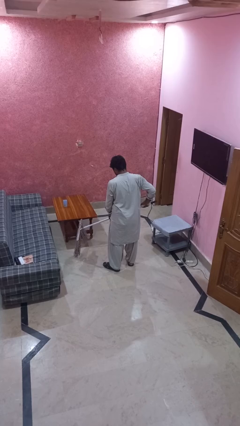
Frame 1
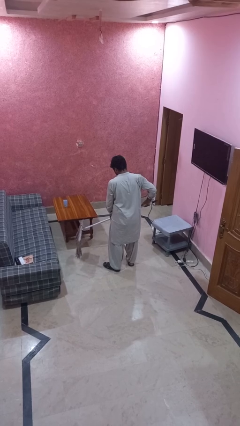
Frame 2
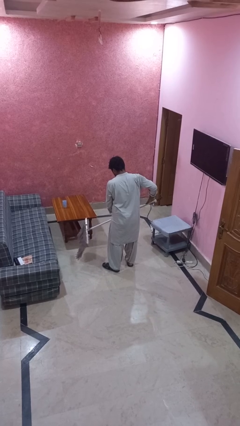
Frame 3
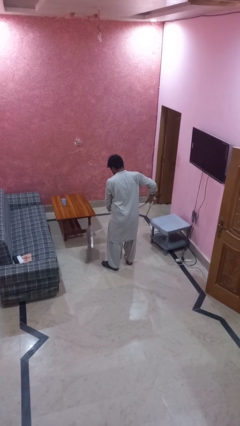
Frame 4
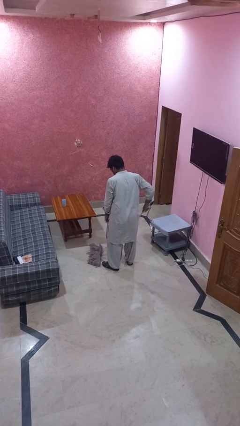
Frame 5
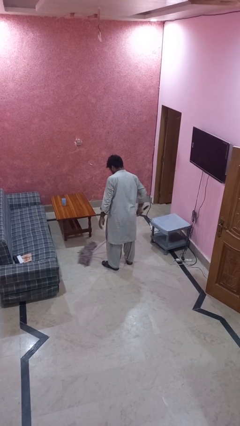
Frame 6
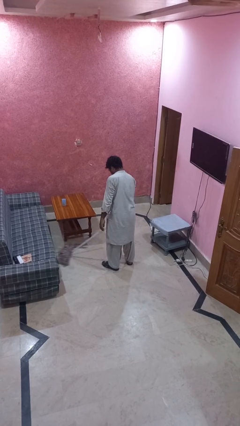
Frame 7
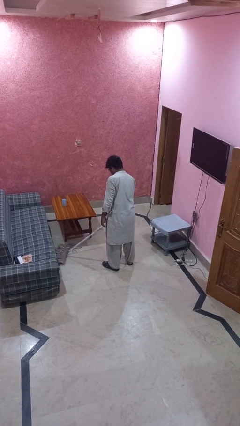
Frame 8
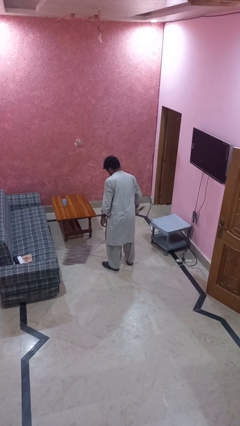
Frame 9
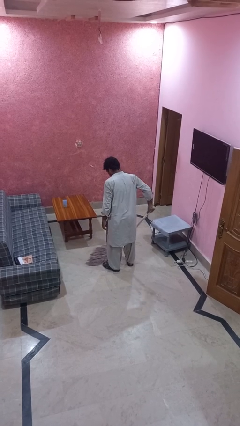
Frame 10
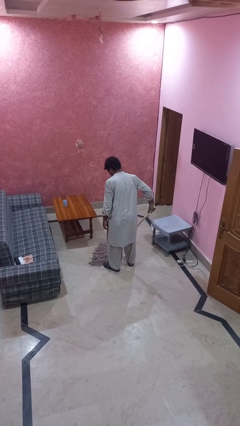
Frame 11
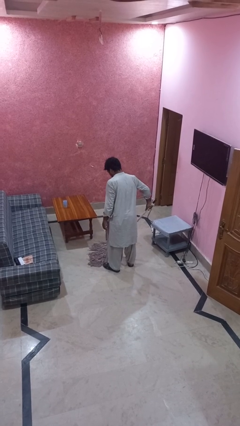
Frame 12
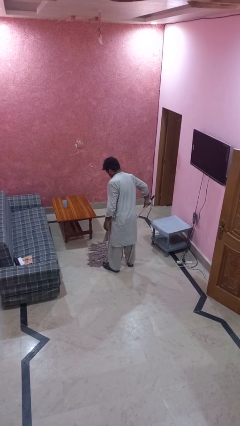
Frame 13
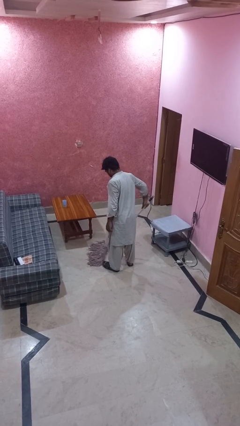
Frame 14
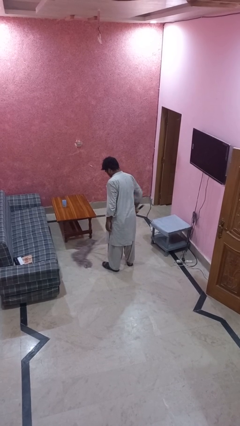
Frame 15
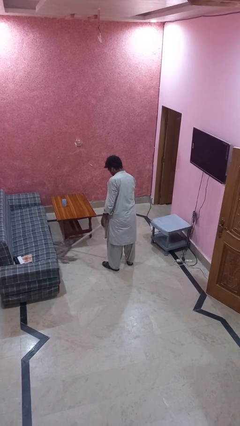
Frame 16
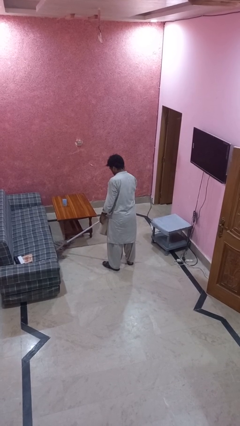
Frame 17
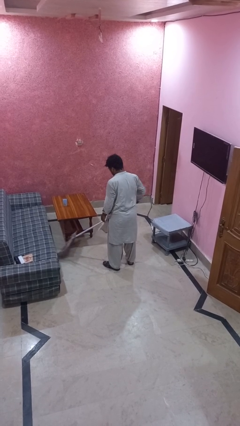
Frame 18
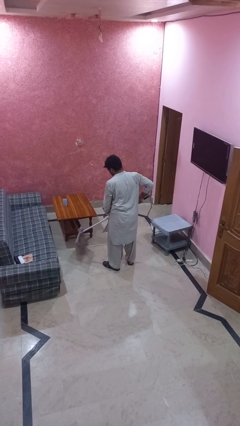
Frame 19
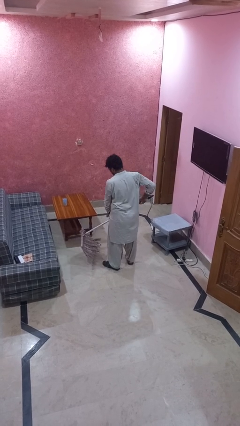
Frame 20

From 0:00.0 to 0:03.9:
person mops

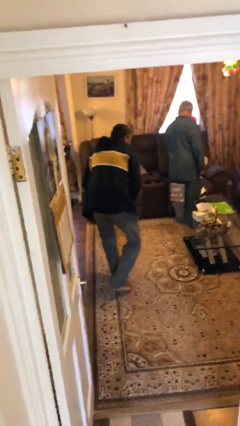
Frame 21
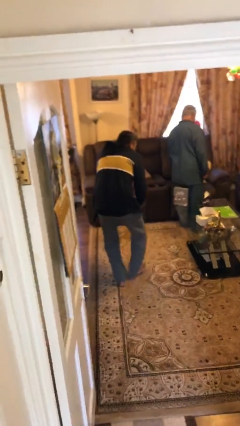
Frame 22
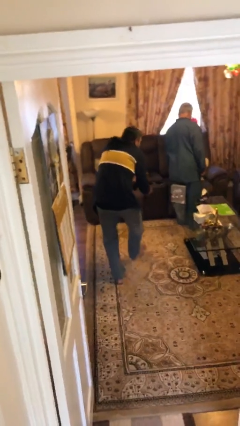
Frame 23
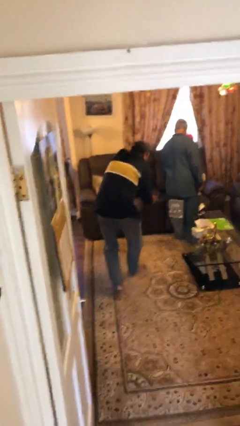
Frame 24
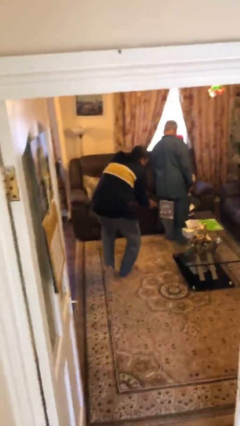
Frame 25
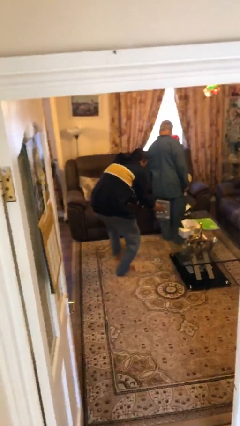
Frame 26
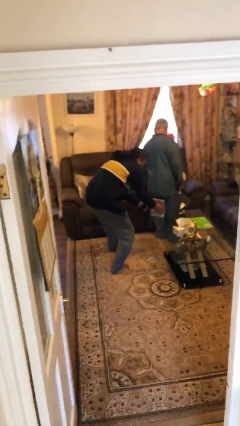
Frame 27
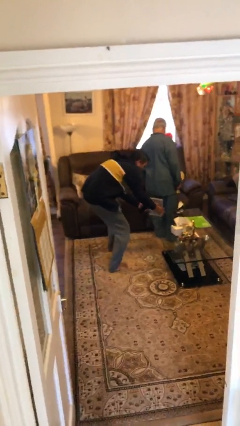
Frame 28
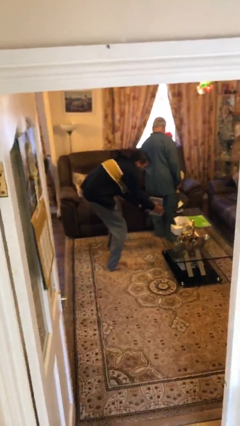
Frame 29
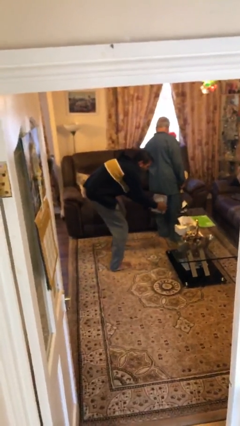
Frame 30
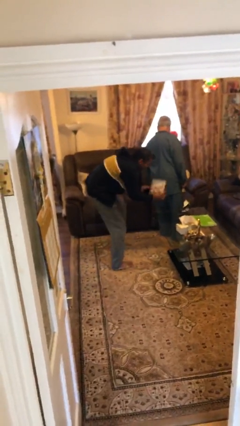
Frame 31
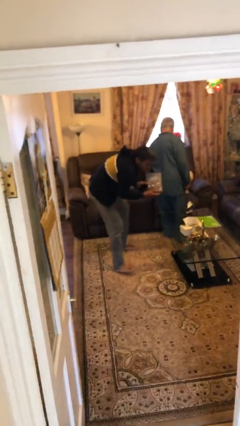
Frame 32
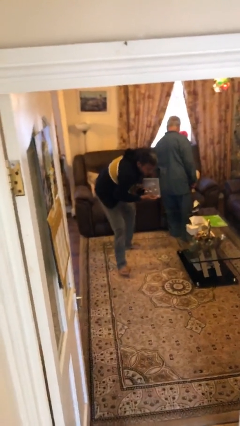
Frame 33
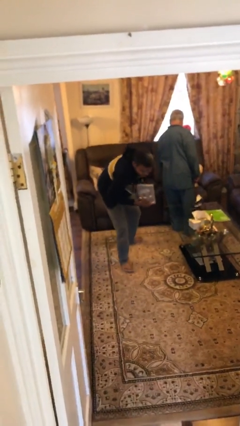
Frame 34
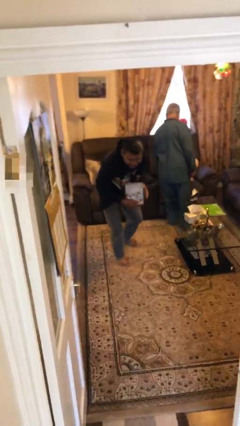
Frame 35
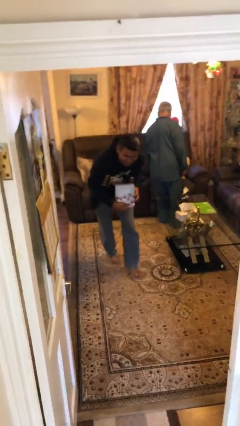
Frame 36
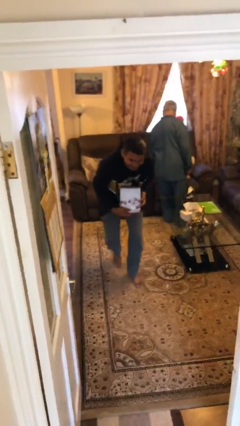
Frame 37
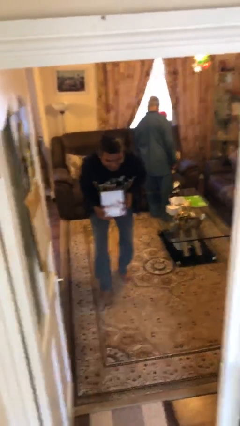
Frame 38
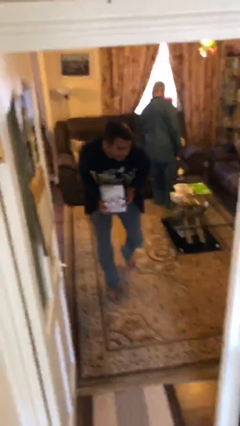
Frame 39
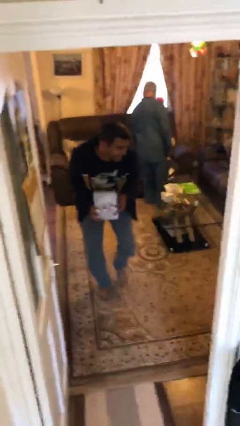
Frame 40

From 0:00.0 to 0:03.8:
person steals object from person

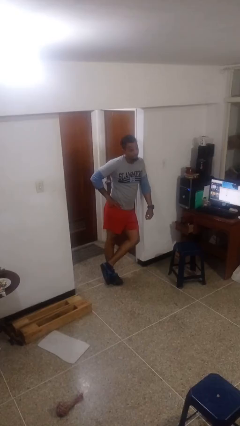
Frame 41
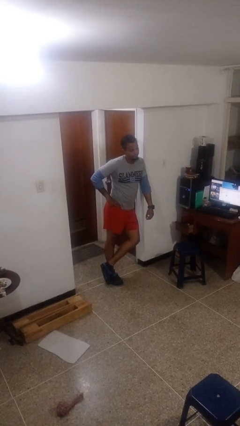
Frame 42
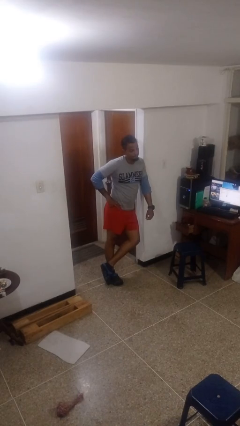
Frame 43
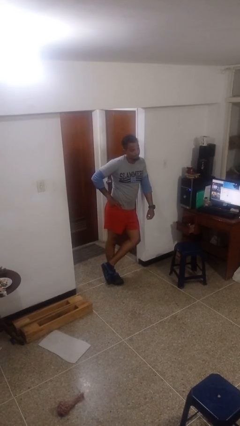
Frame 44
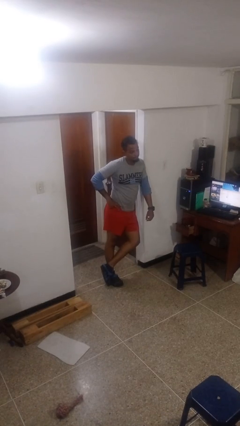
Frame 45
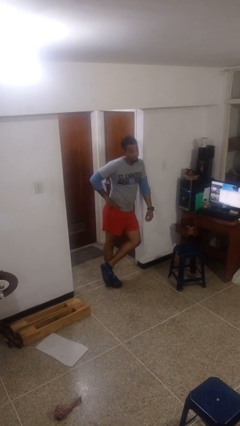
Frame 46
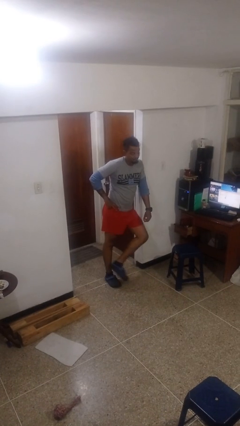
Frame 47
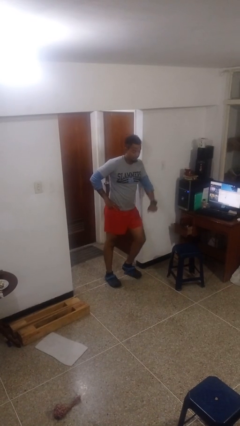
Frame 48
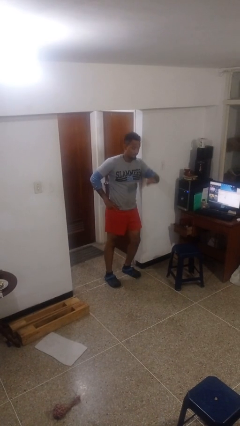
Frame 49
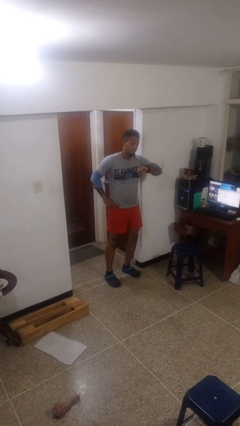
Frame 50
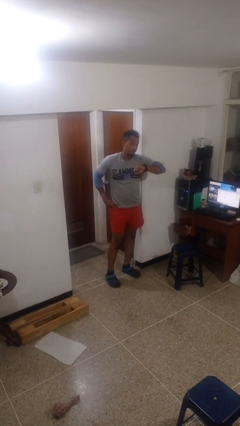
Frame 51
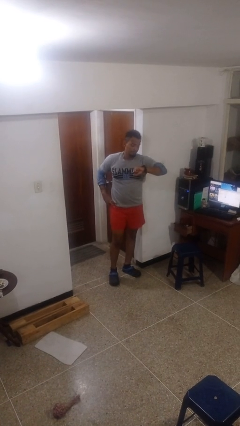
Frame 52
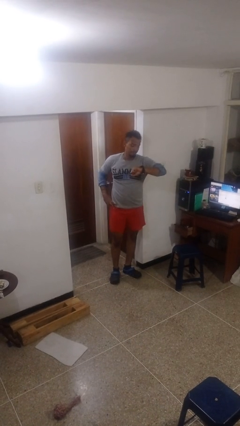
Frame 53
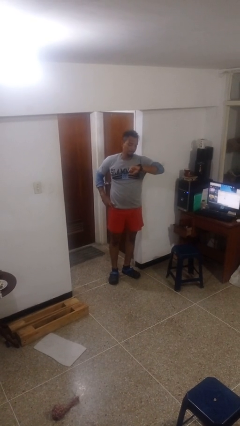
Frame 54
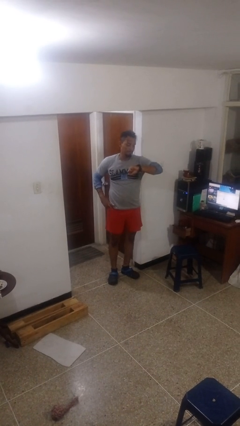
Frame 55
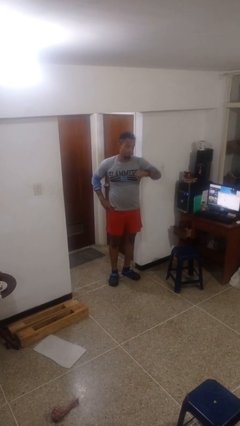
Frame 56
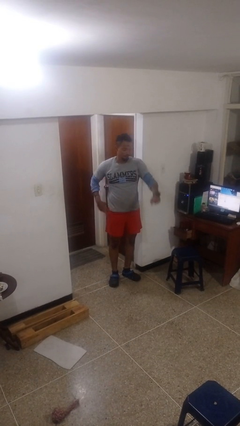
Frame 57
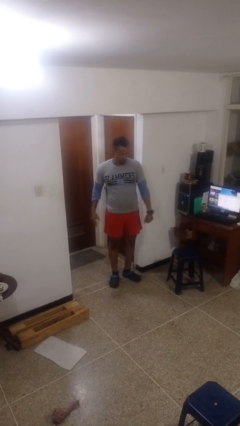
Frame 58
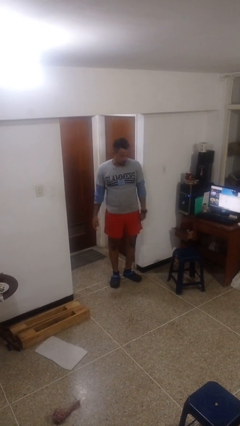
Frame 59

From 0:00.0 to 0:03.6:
person looks at wristwatch

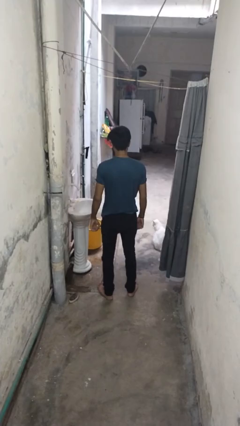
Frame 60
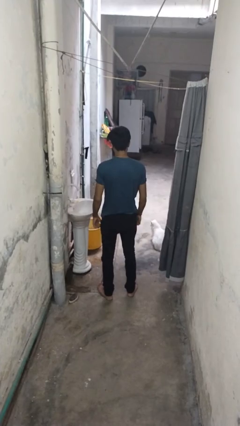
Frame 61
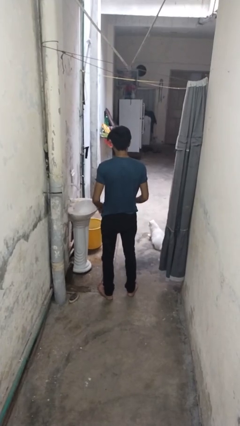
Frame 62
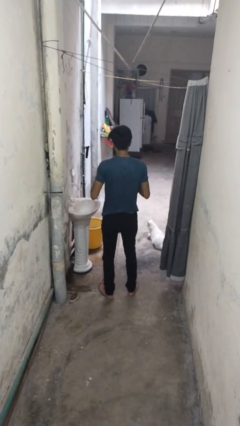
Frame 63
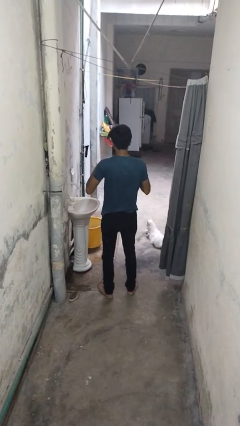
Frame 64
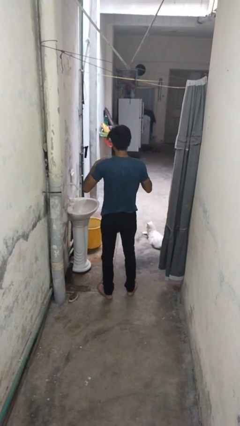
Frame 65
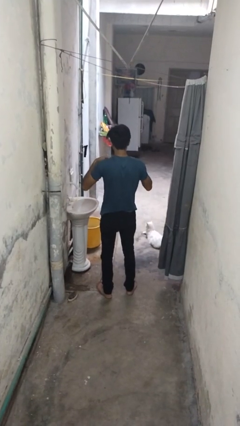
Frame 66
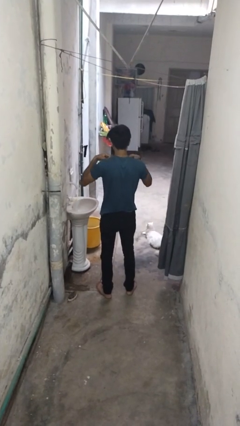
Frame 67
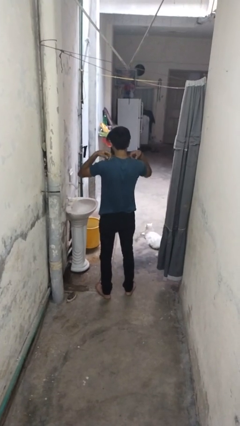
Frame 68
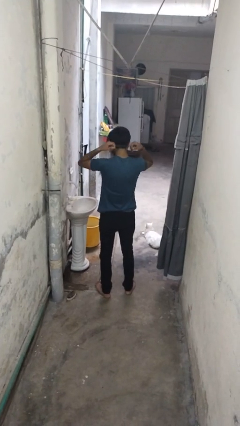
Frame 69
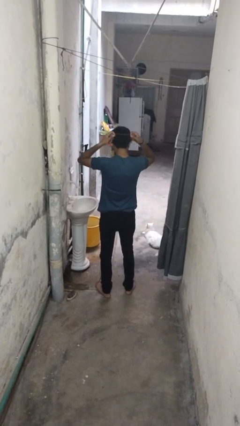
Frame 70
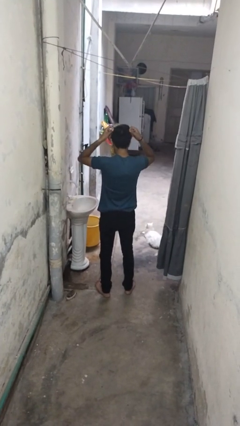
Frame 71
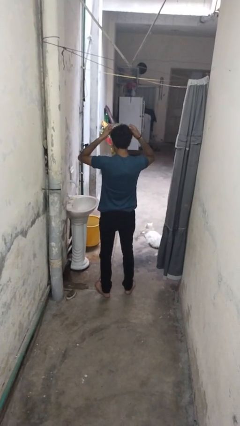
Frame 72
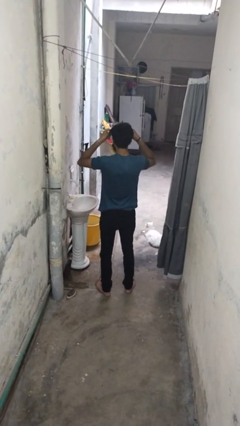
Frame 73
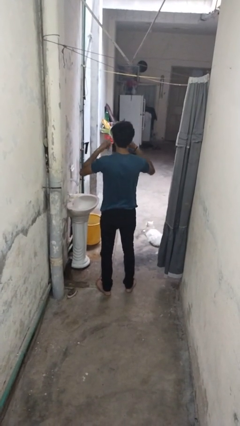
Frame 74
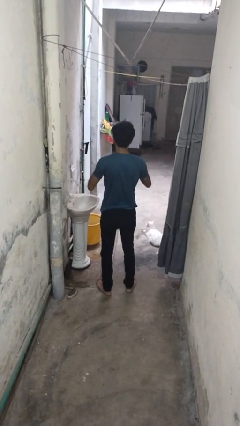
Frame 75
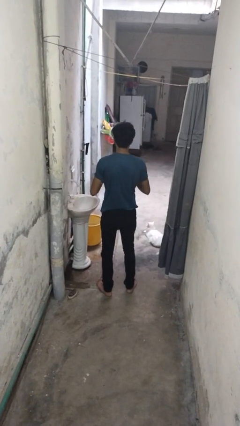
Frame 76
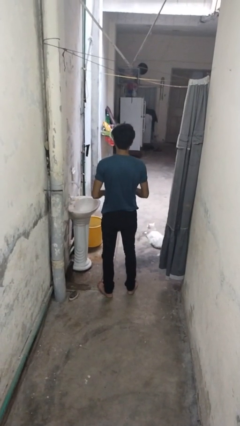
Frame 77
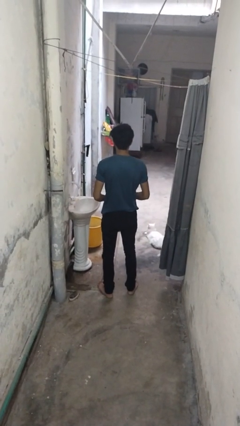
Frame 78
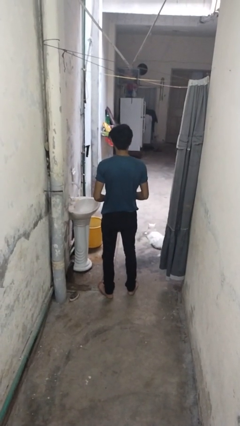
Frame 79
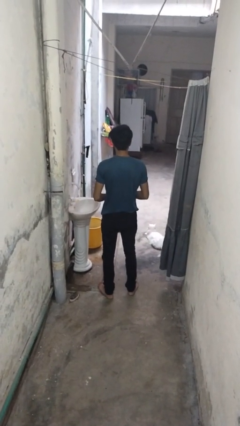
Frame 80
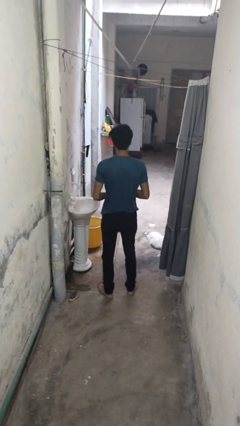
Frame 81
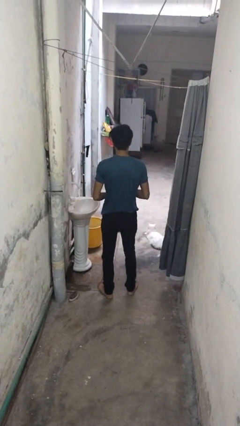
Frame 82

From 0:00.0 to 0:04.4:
person takes off necklace

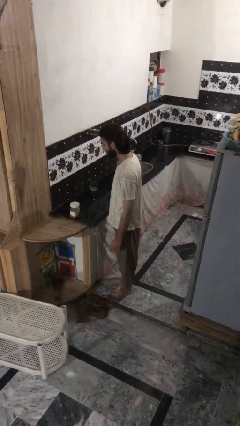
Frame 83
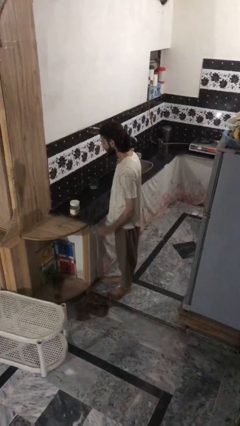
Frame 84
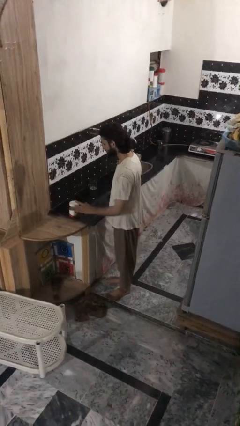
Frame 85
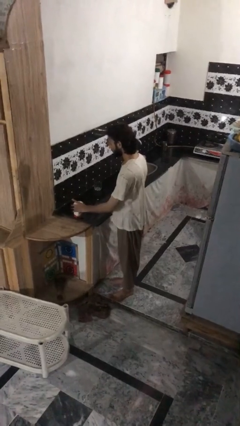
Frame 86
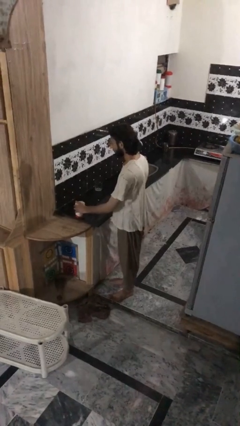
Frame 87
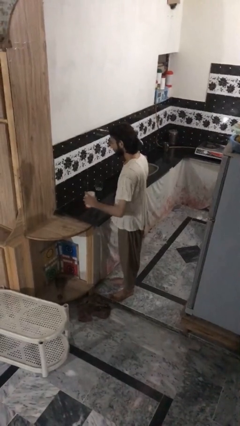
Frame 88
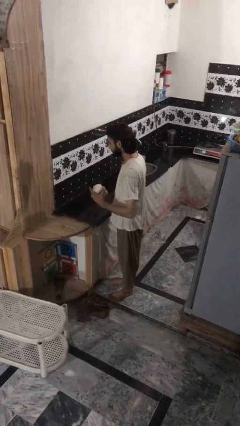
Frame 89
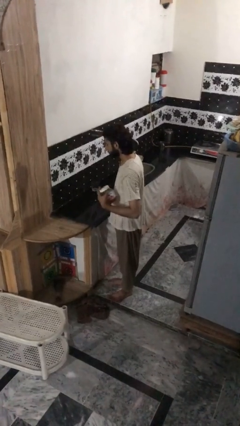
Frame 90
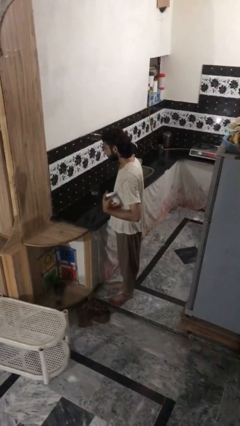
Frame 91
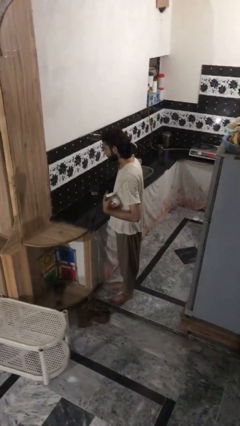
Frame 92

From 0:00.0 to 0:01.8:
person picks up object from countertop
